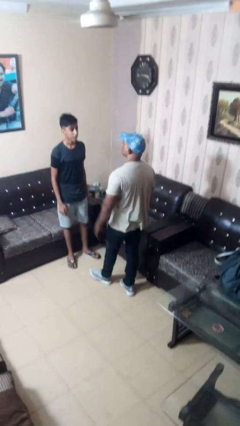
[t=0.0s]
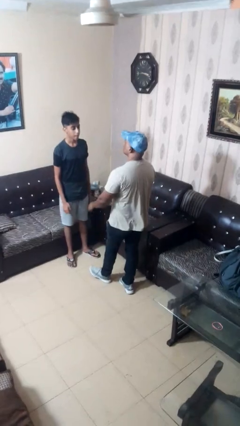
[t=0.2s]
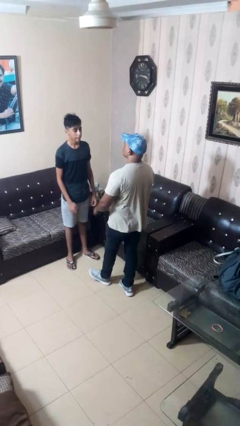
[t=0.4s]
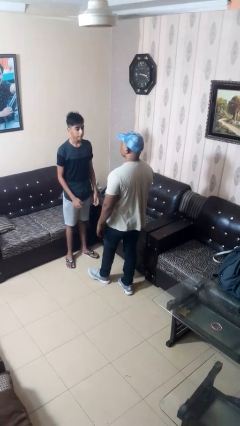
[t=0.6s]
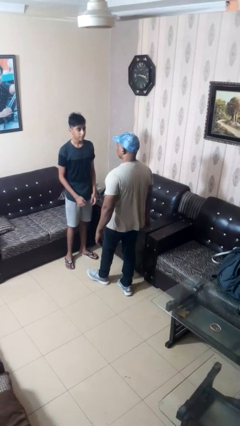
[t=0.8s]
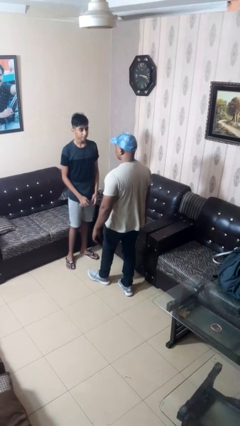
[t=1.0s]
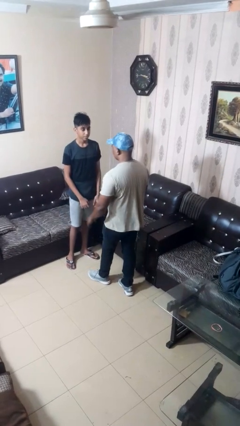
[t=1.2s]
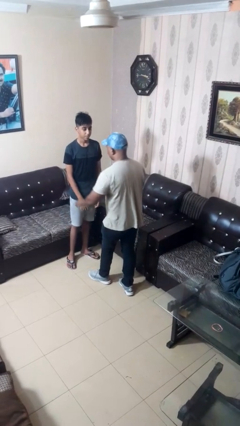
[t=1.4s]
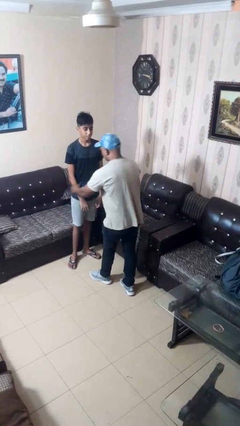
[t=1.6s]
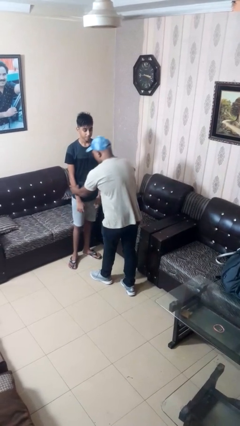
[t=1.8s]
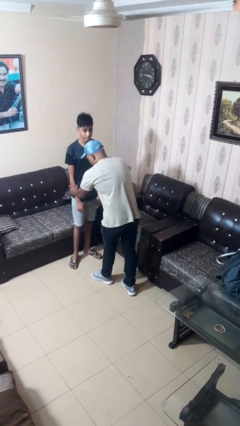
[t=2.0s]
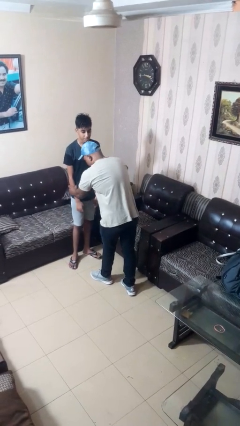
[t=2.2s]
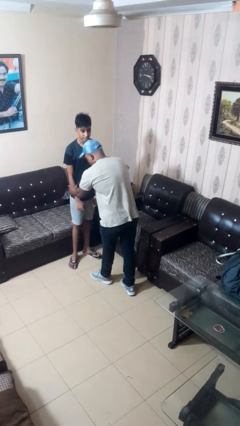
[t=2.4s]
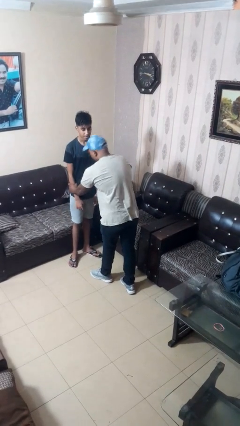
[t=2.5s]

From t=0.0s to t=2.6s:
person grabs person by forearm

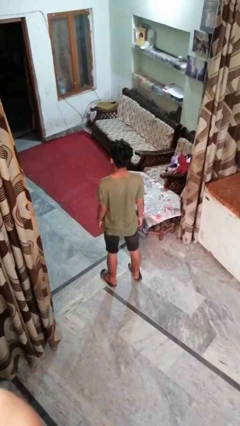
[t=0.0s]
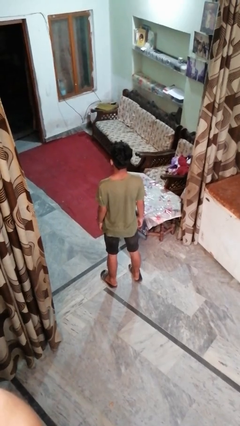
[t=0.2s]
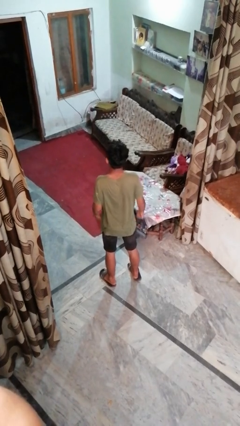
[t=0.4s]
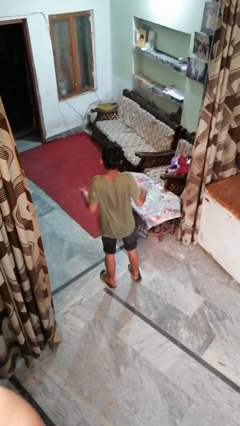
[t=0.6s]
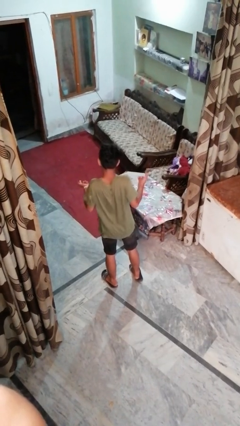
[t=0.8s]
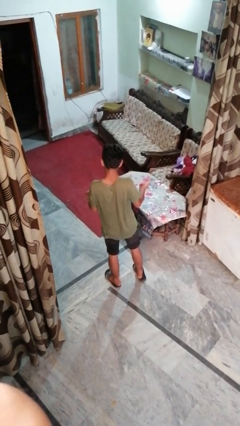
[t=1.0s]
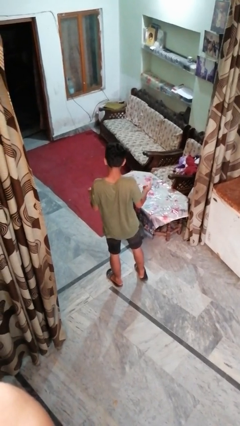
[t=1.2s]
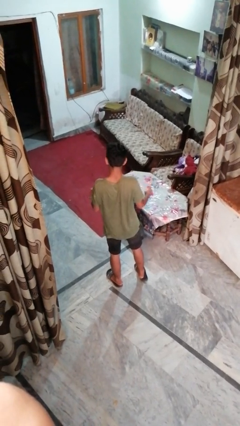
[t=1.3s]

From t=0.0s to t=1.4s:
person shrugs

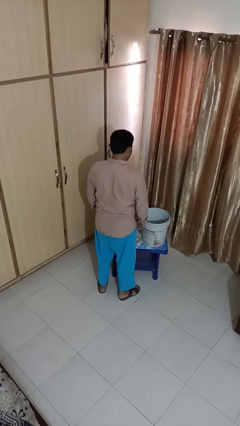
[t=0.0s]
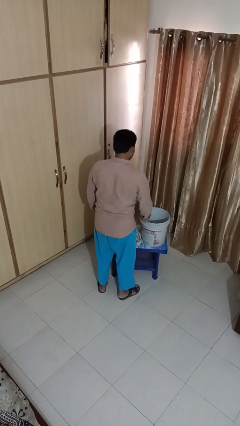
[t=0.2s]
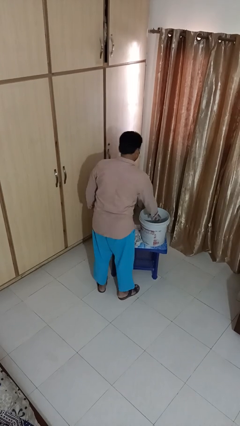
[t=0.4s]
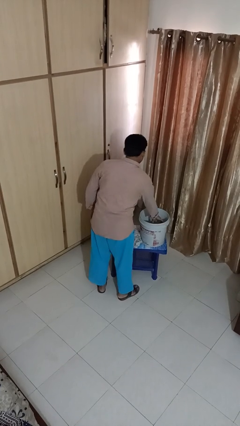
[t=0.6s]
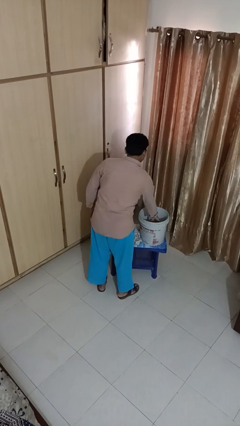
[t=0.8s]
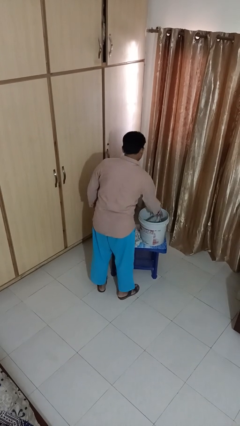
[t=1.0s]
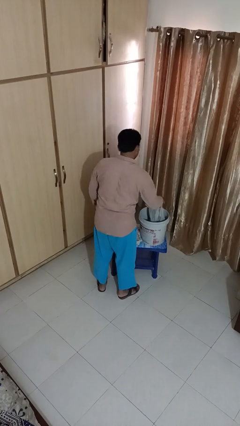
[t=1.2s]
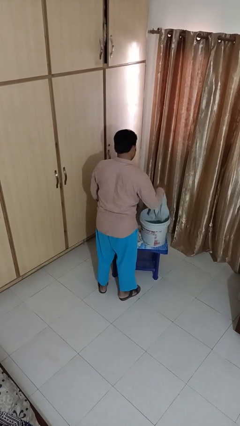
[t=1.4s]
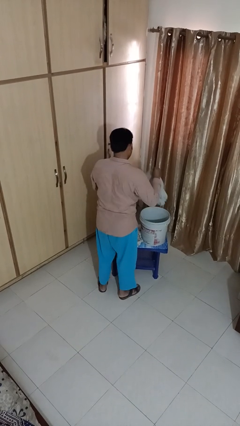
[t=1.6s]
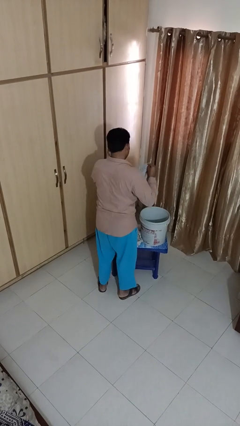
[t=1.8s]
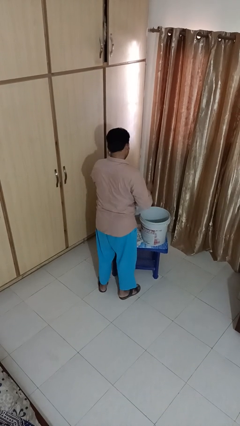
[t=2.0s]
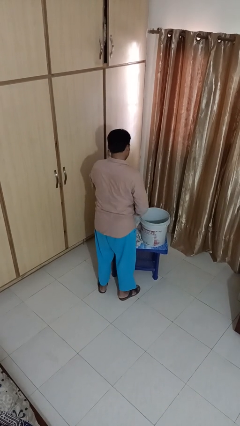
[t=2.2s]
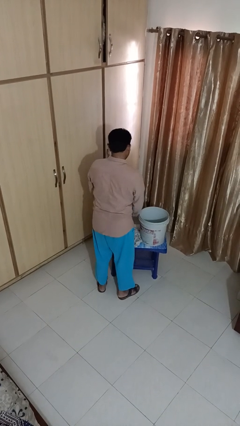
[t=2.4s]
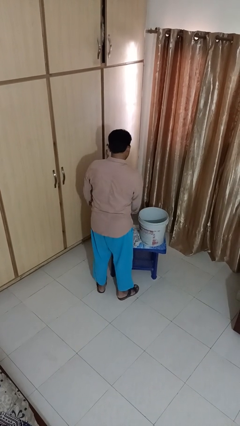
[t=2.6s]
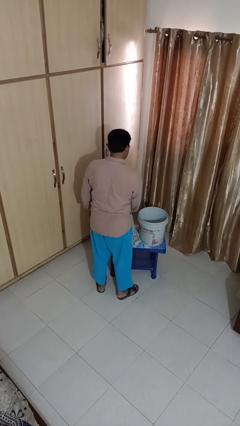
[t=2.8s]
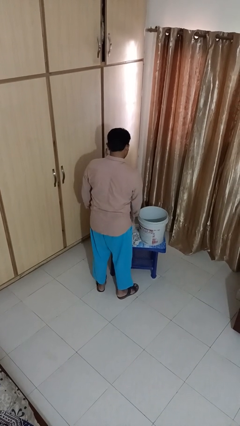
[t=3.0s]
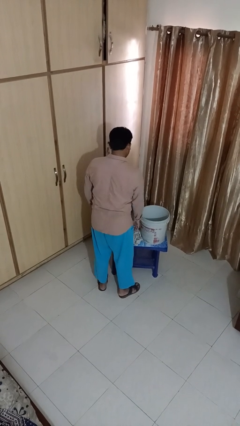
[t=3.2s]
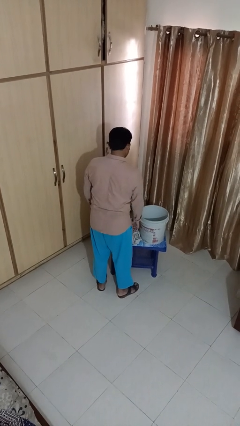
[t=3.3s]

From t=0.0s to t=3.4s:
person takes object from basket

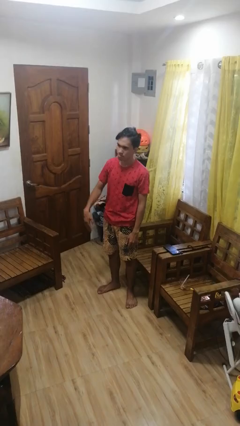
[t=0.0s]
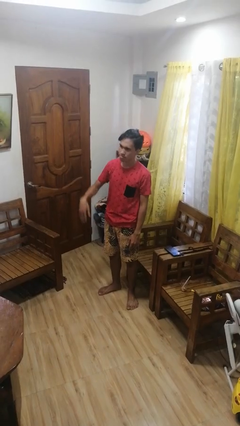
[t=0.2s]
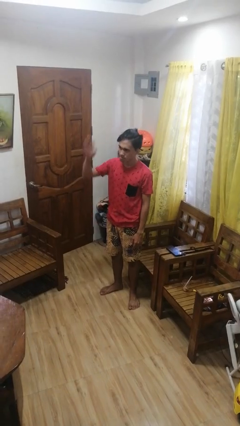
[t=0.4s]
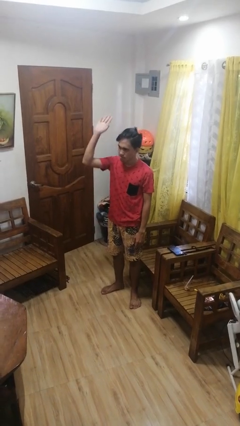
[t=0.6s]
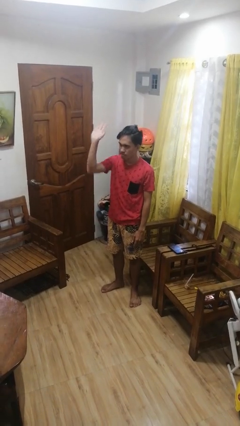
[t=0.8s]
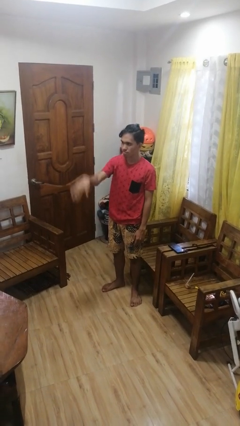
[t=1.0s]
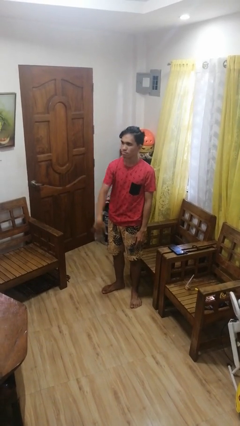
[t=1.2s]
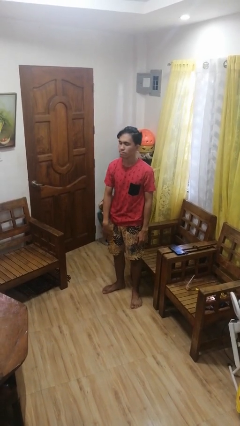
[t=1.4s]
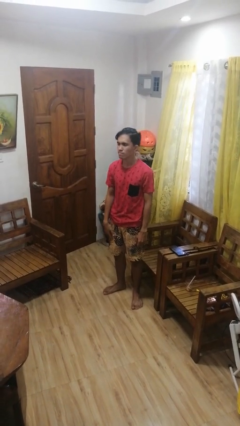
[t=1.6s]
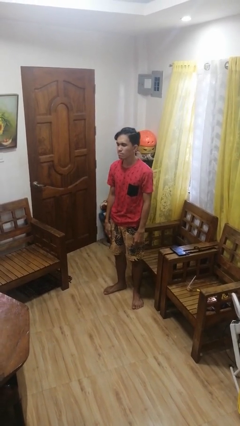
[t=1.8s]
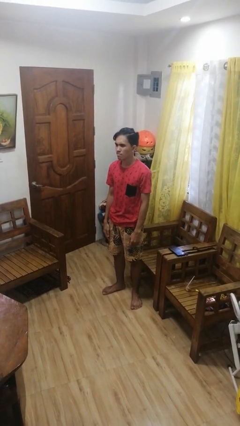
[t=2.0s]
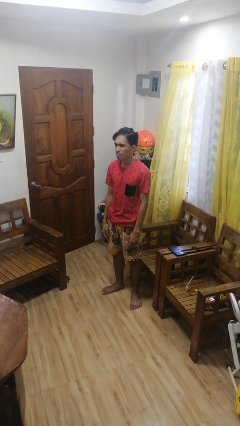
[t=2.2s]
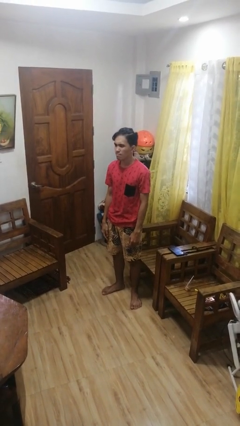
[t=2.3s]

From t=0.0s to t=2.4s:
person gestures swipe down

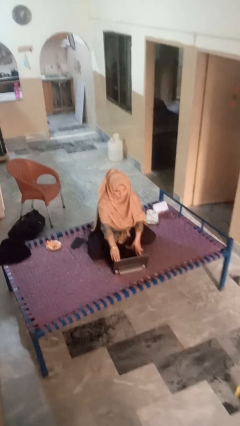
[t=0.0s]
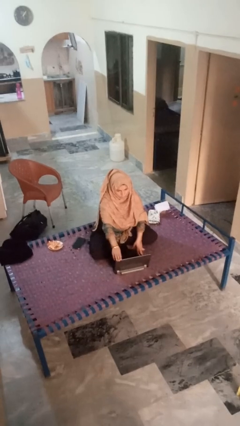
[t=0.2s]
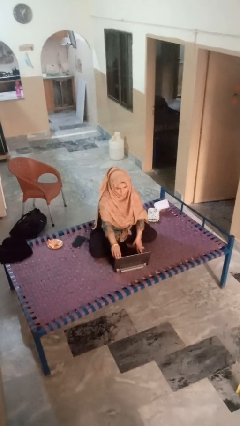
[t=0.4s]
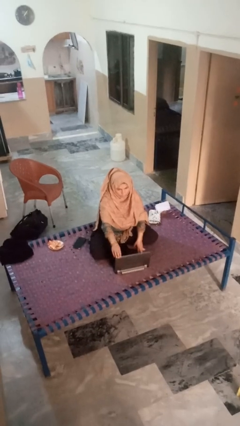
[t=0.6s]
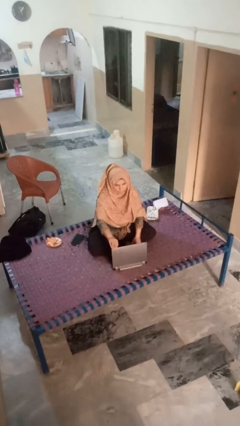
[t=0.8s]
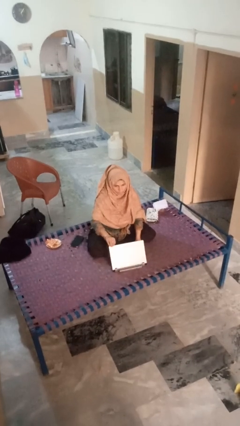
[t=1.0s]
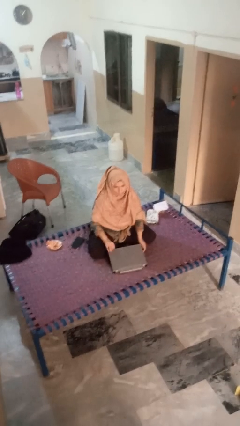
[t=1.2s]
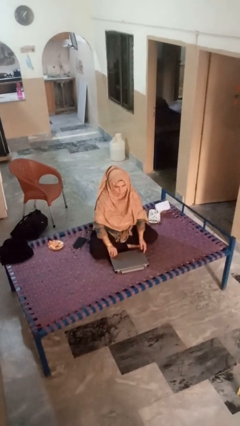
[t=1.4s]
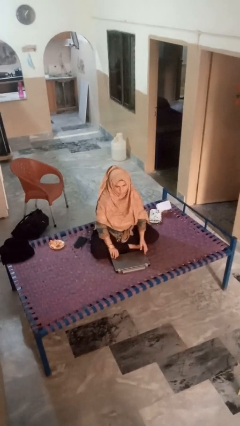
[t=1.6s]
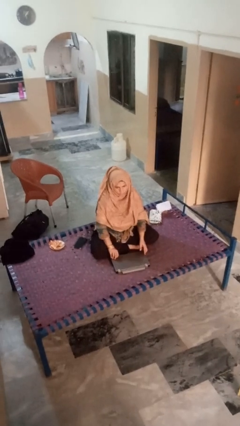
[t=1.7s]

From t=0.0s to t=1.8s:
person closes laptop

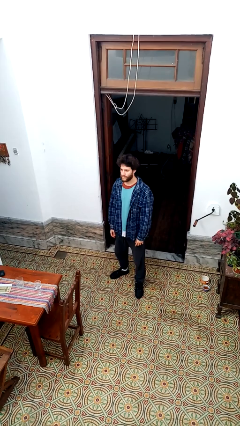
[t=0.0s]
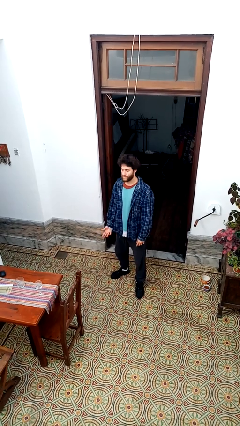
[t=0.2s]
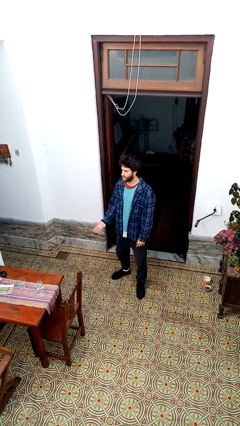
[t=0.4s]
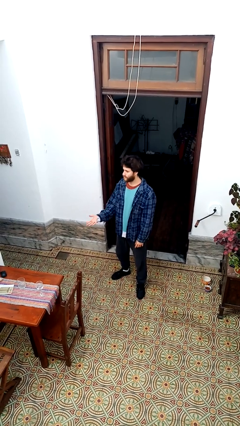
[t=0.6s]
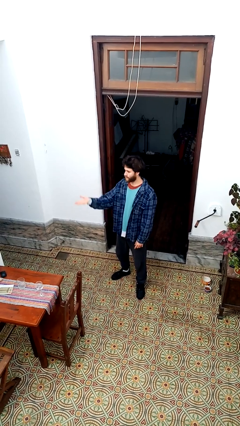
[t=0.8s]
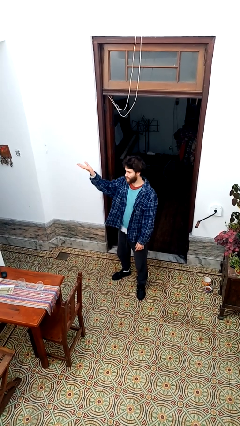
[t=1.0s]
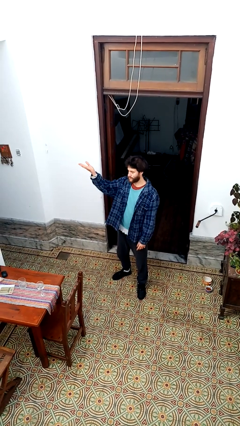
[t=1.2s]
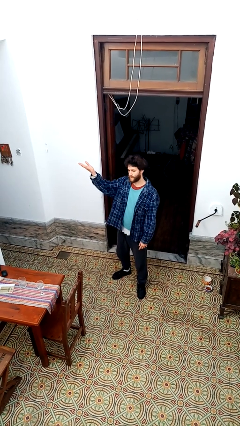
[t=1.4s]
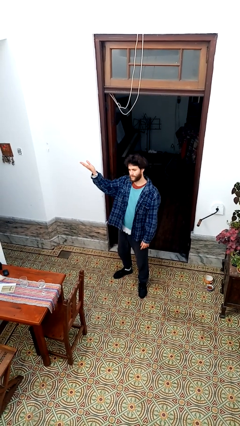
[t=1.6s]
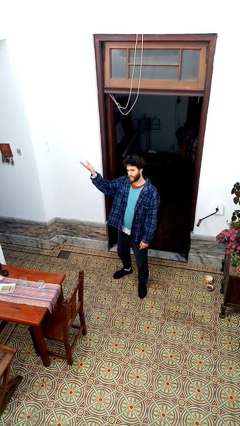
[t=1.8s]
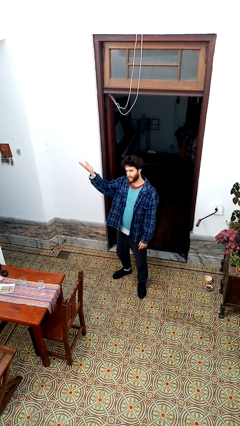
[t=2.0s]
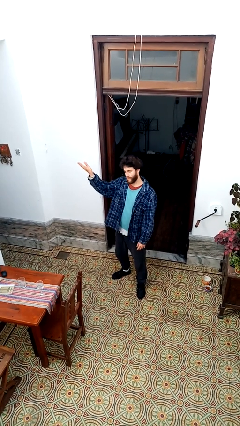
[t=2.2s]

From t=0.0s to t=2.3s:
person gestures swipe up

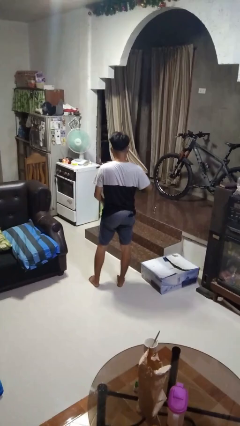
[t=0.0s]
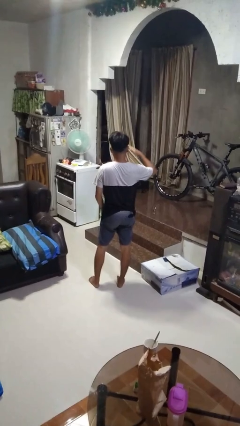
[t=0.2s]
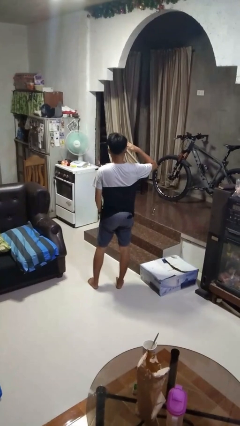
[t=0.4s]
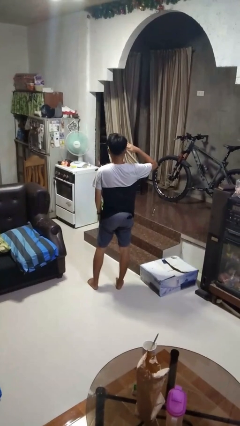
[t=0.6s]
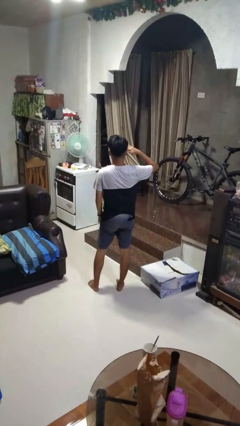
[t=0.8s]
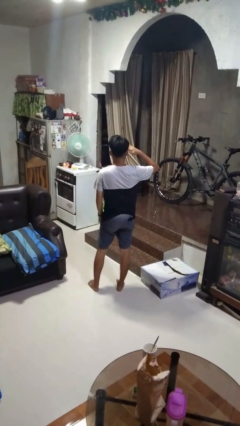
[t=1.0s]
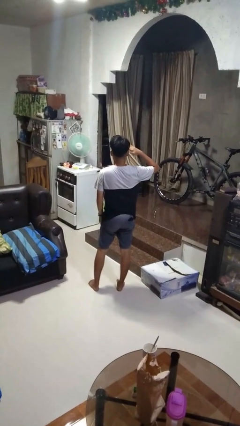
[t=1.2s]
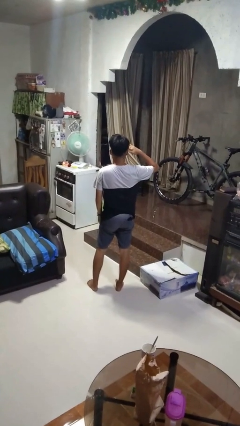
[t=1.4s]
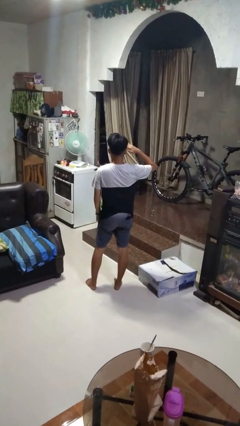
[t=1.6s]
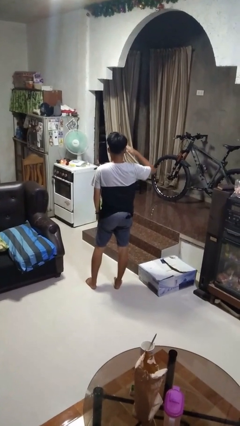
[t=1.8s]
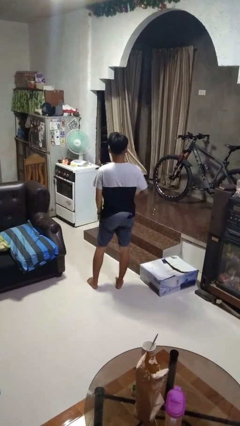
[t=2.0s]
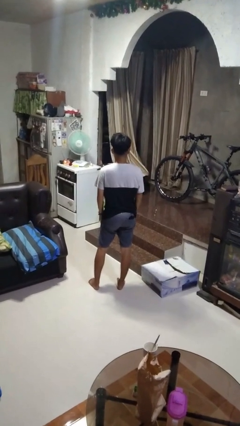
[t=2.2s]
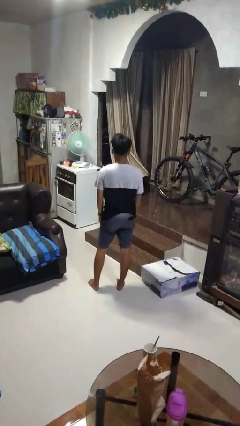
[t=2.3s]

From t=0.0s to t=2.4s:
person salutes

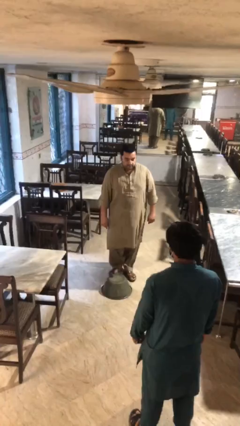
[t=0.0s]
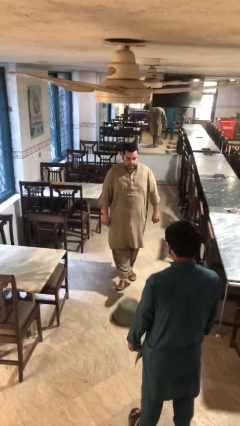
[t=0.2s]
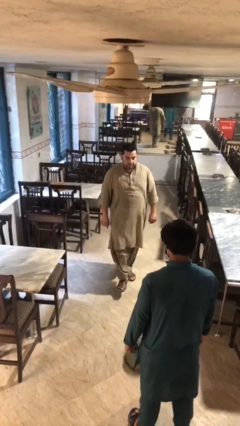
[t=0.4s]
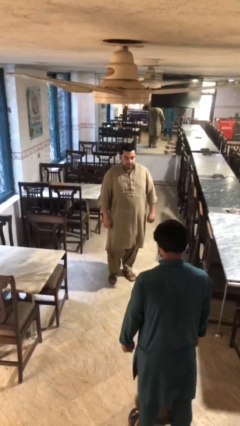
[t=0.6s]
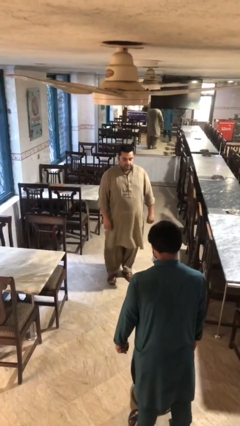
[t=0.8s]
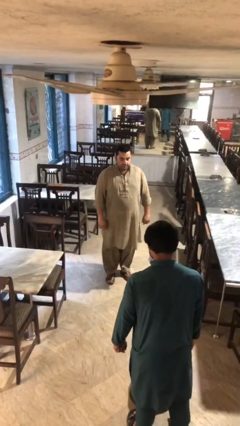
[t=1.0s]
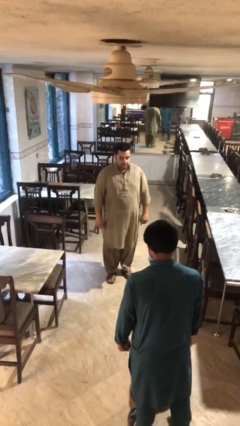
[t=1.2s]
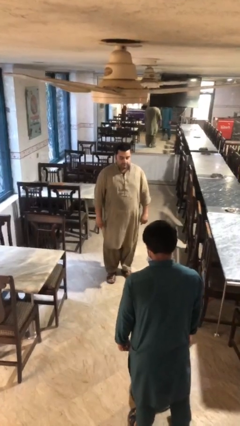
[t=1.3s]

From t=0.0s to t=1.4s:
person kicks object to person
